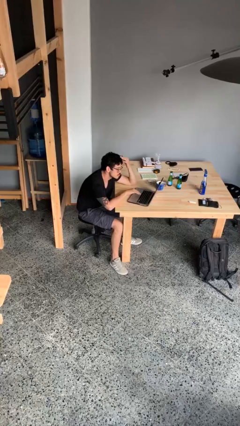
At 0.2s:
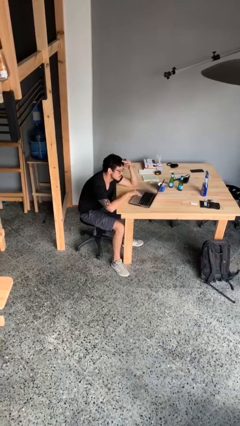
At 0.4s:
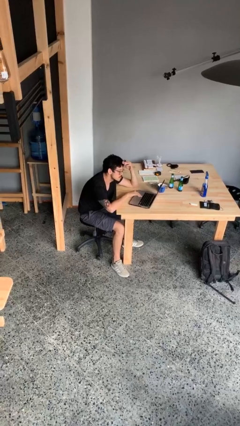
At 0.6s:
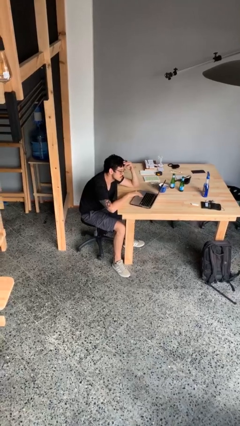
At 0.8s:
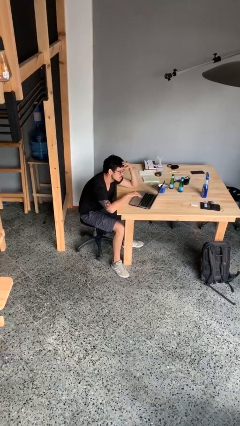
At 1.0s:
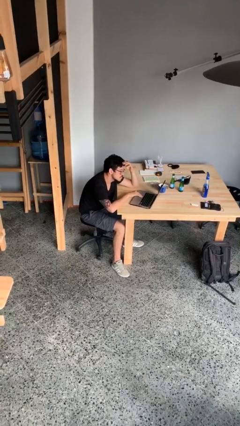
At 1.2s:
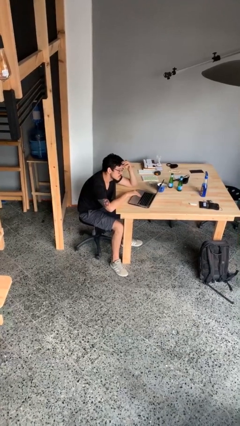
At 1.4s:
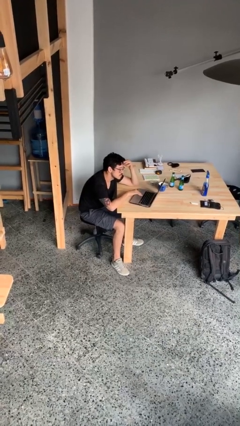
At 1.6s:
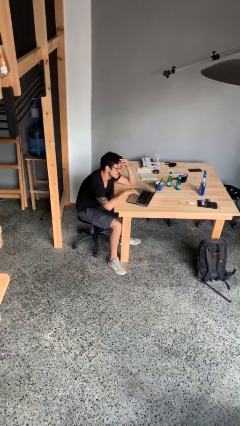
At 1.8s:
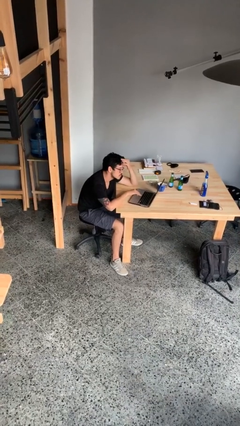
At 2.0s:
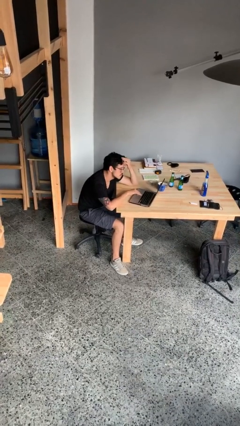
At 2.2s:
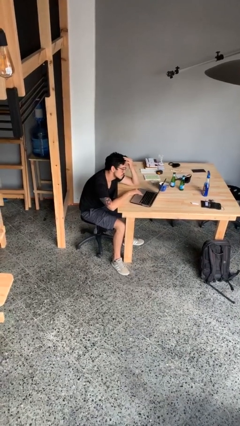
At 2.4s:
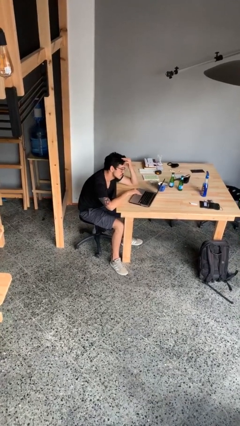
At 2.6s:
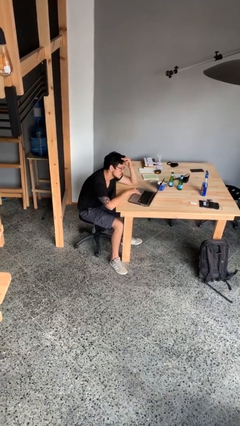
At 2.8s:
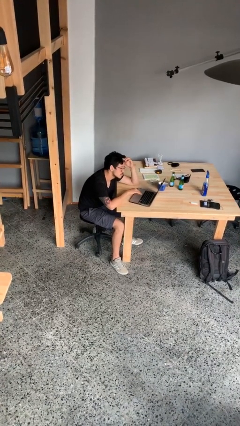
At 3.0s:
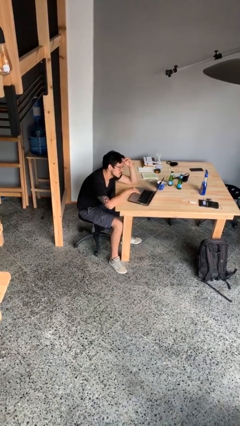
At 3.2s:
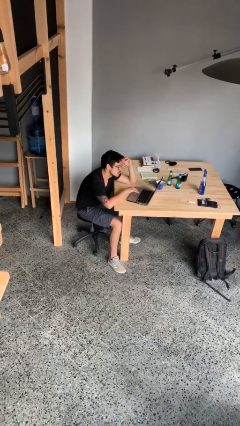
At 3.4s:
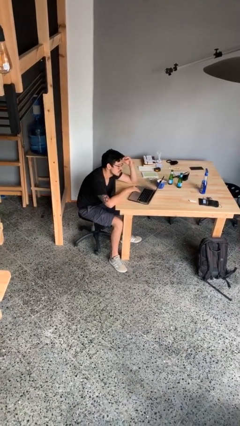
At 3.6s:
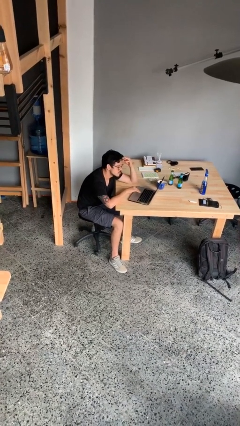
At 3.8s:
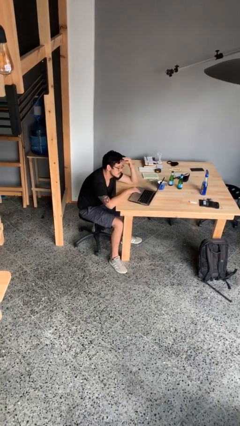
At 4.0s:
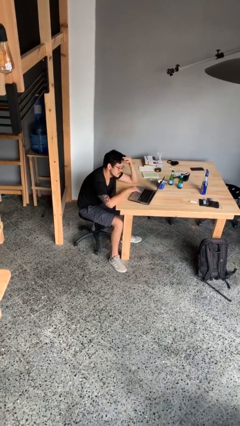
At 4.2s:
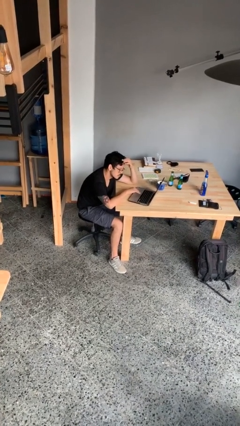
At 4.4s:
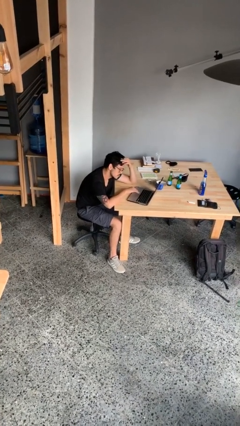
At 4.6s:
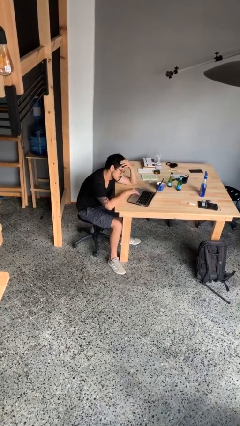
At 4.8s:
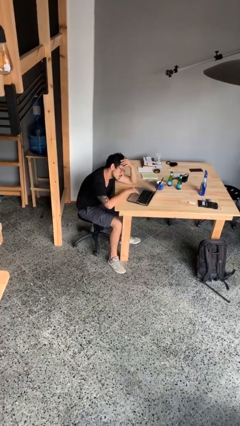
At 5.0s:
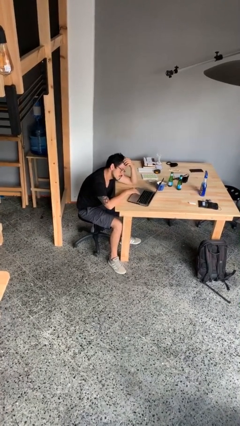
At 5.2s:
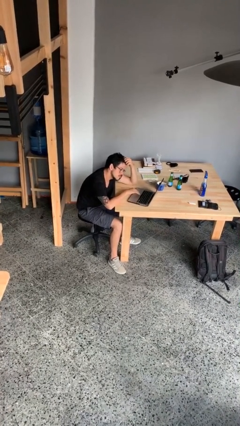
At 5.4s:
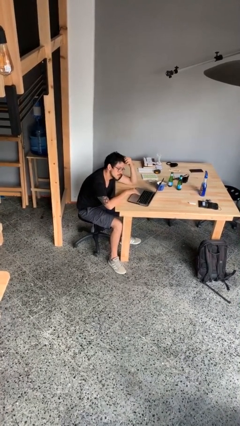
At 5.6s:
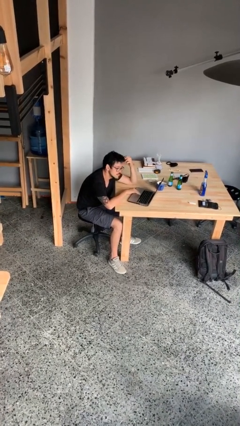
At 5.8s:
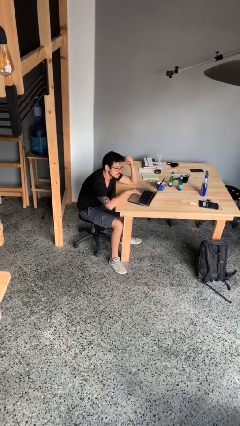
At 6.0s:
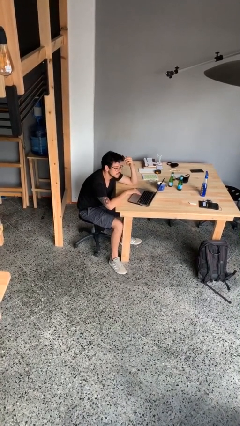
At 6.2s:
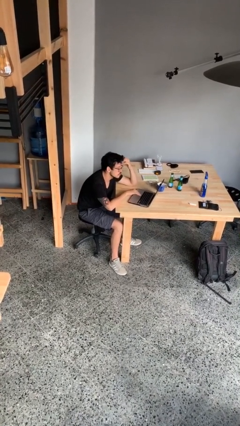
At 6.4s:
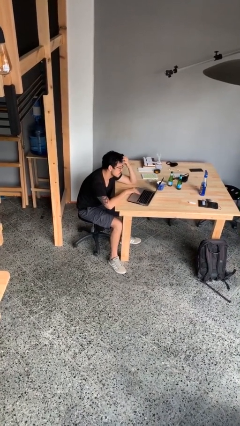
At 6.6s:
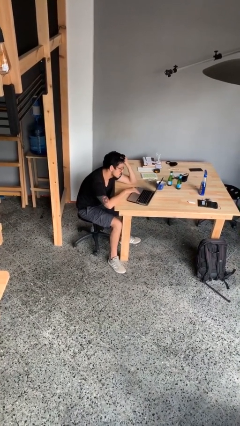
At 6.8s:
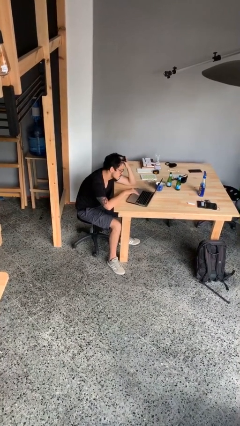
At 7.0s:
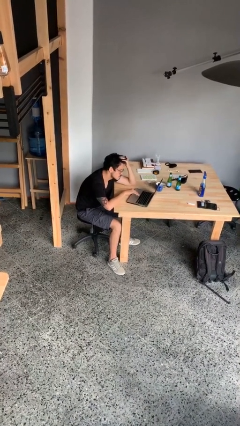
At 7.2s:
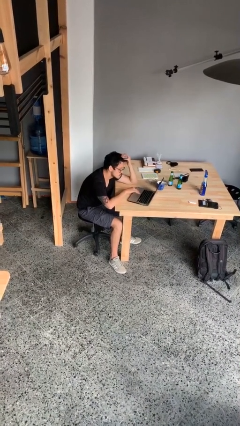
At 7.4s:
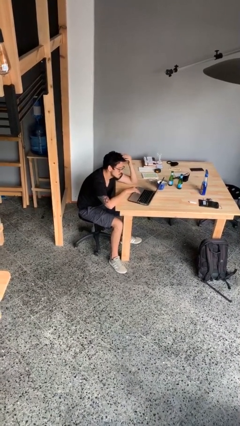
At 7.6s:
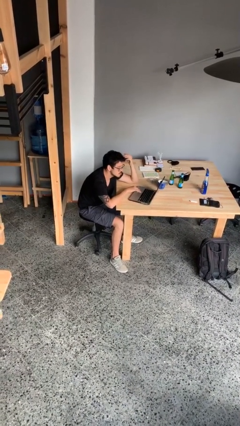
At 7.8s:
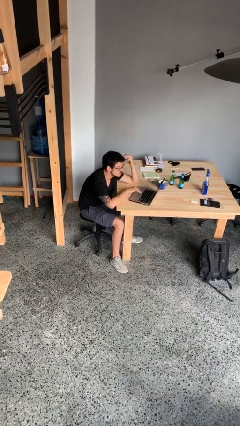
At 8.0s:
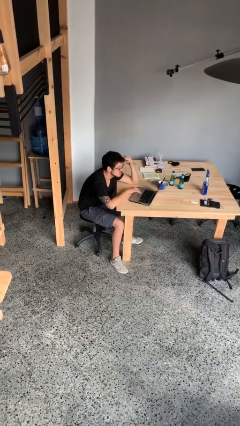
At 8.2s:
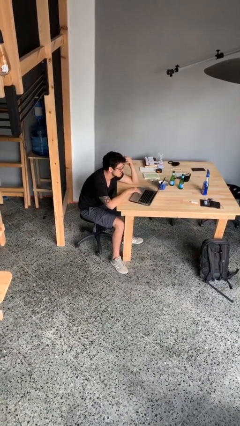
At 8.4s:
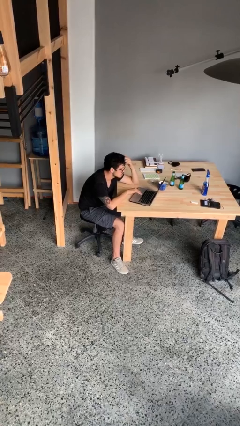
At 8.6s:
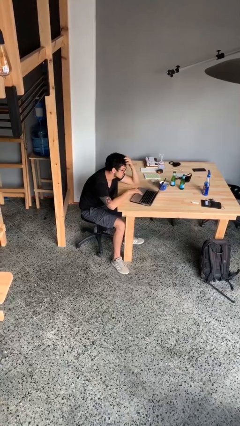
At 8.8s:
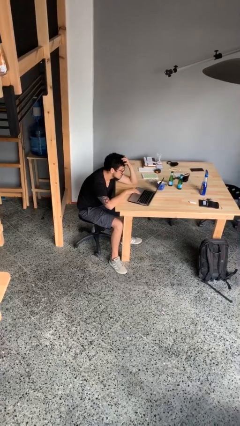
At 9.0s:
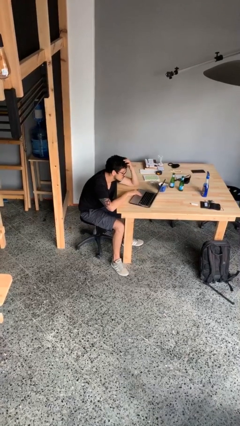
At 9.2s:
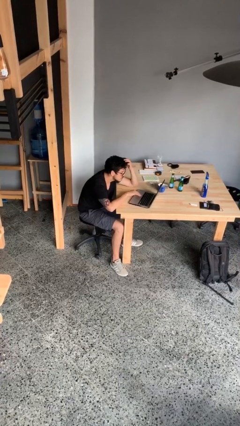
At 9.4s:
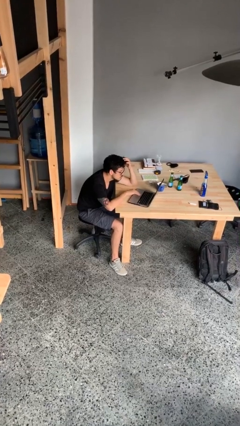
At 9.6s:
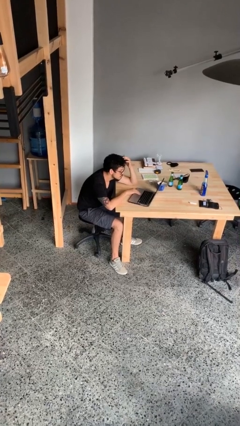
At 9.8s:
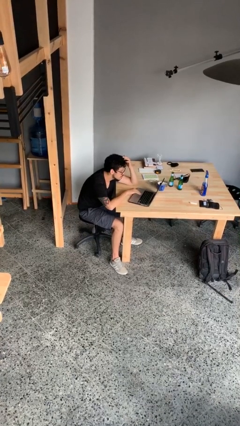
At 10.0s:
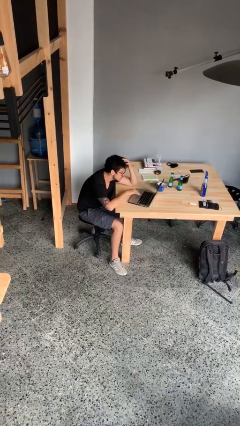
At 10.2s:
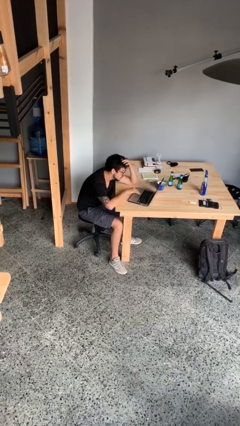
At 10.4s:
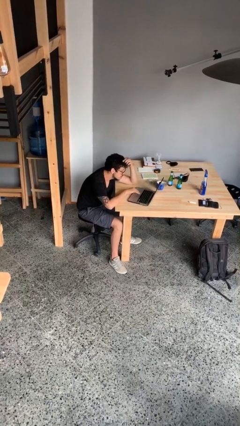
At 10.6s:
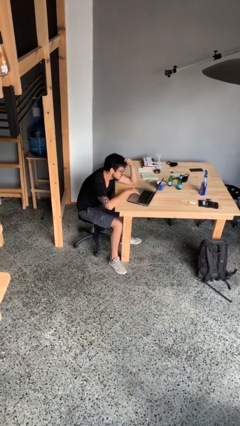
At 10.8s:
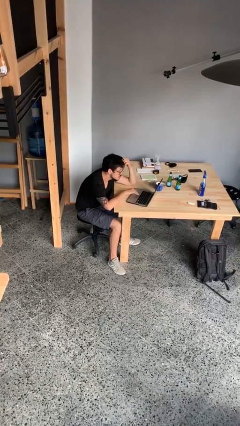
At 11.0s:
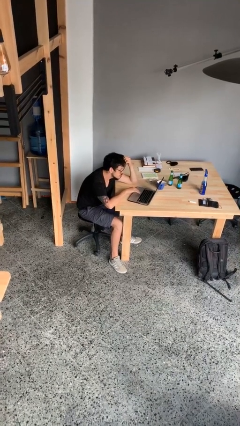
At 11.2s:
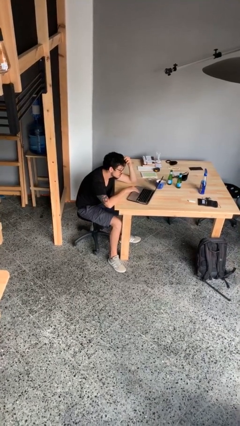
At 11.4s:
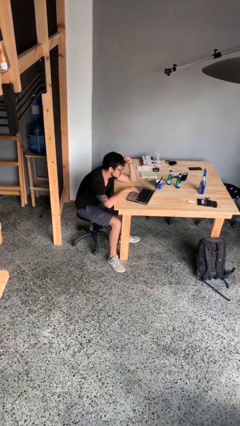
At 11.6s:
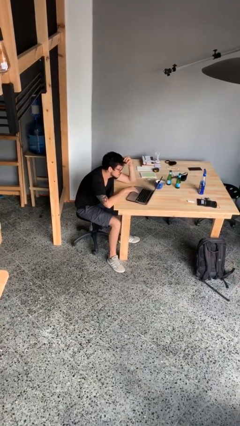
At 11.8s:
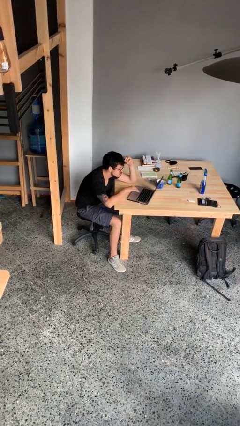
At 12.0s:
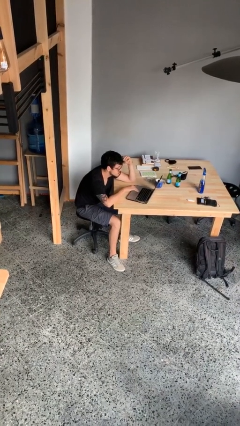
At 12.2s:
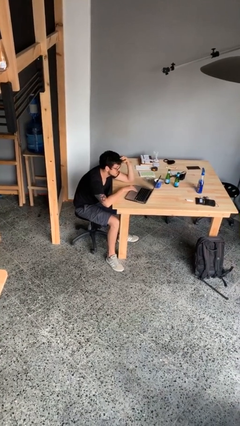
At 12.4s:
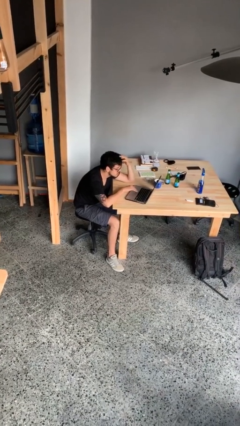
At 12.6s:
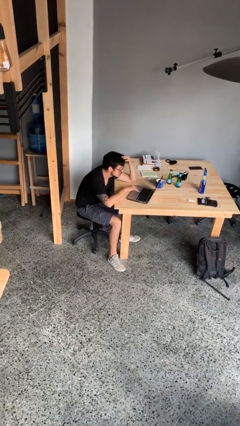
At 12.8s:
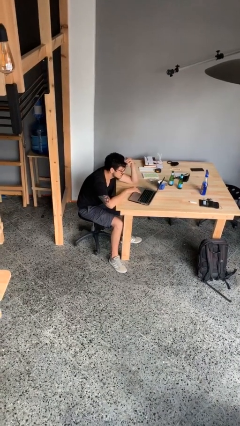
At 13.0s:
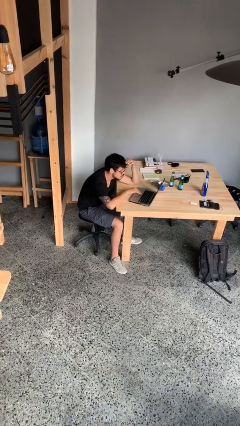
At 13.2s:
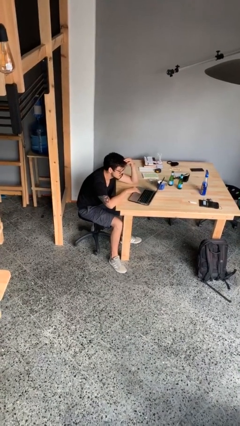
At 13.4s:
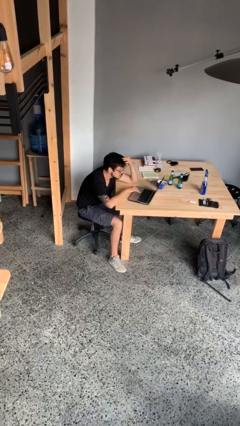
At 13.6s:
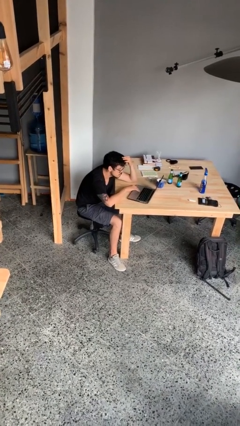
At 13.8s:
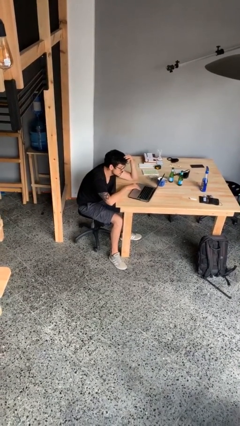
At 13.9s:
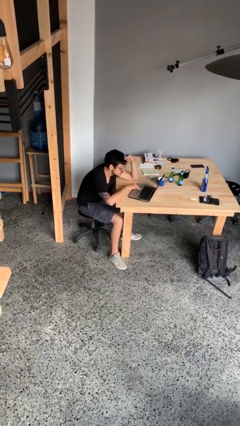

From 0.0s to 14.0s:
person interacts with laptop

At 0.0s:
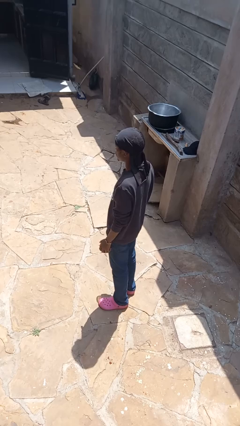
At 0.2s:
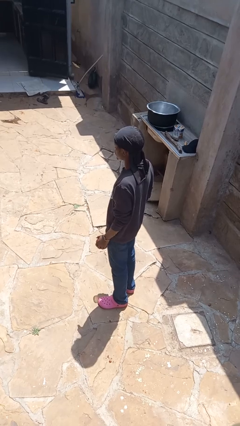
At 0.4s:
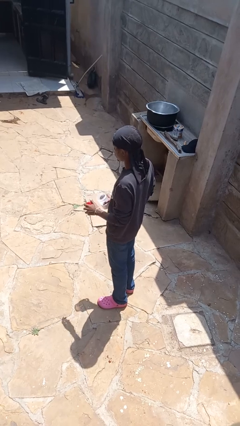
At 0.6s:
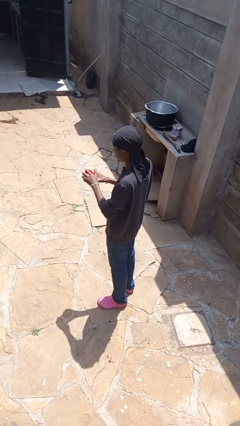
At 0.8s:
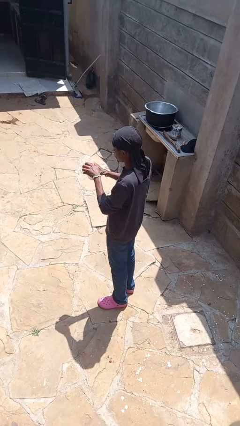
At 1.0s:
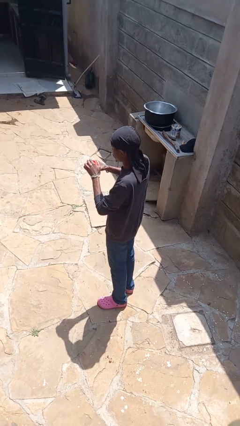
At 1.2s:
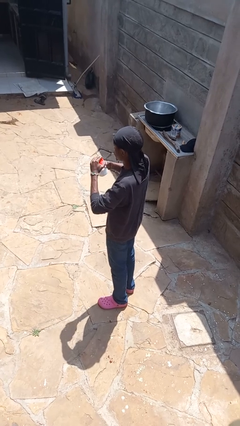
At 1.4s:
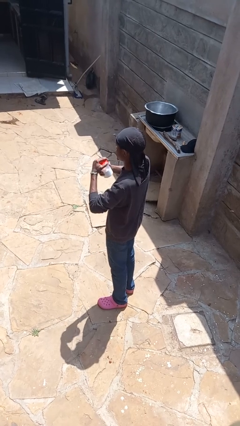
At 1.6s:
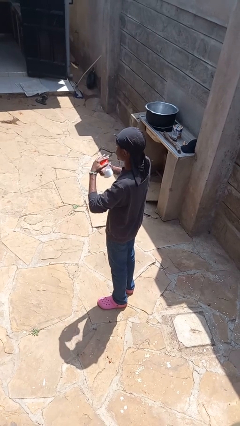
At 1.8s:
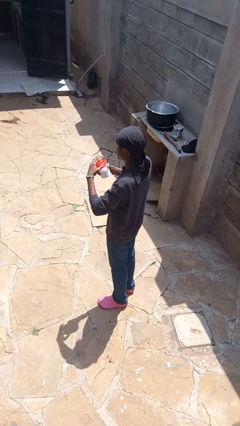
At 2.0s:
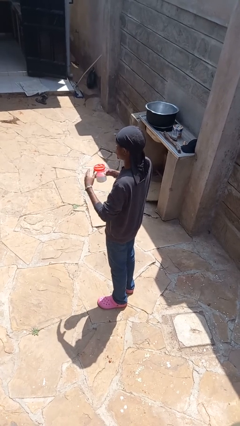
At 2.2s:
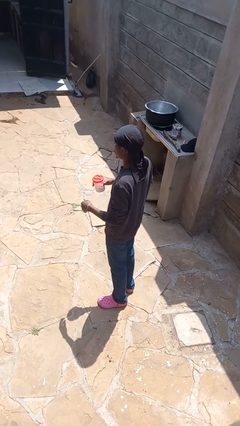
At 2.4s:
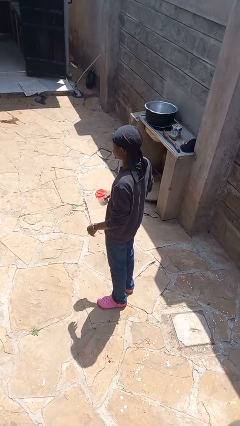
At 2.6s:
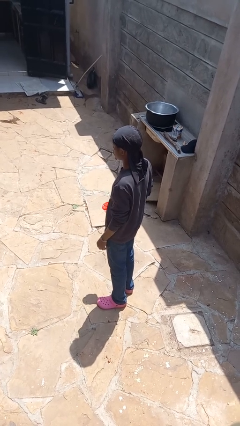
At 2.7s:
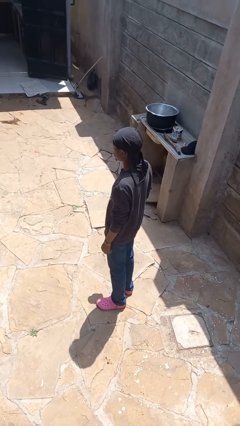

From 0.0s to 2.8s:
person closes jar

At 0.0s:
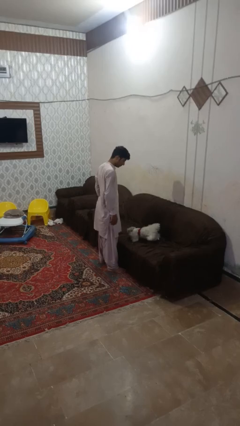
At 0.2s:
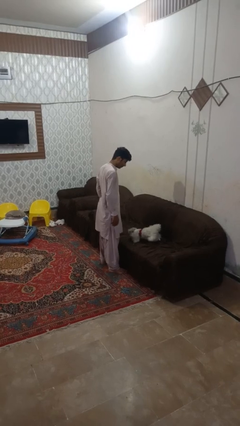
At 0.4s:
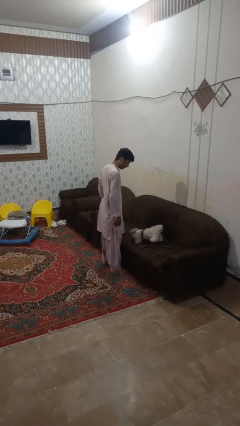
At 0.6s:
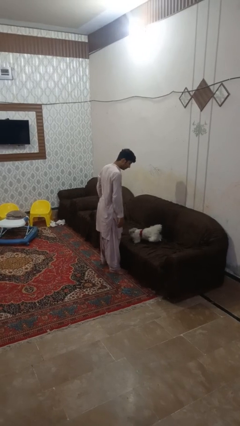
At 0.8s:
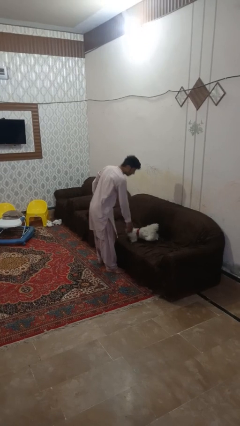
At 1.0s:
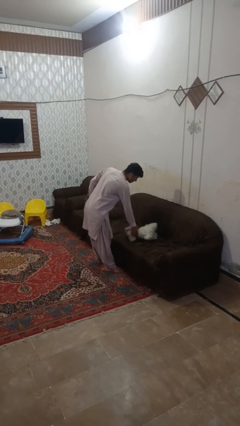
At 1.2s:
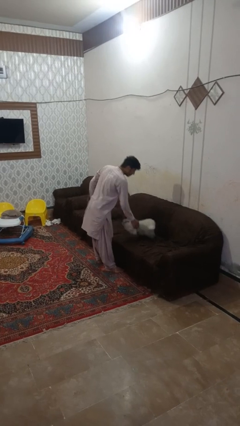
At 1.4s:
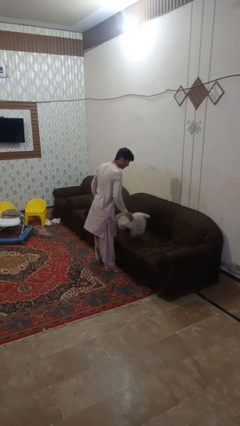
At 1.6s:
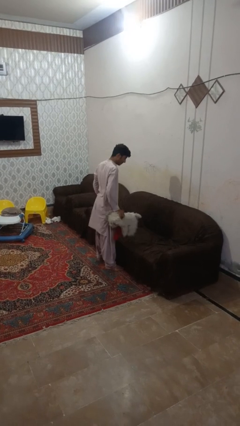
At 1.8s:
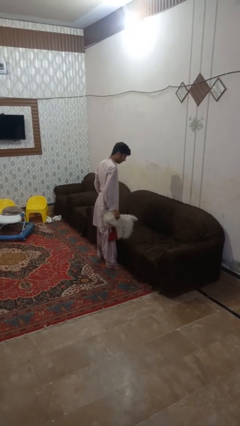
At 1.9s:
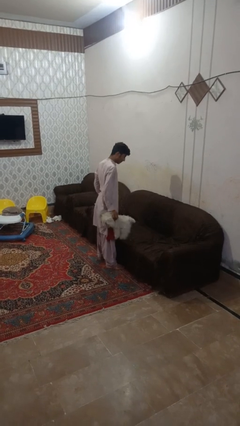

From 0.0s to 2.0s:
person picks up object from couch
